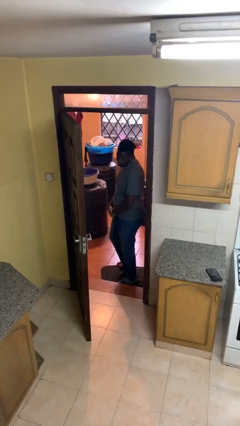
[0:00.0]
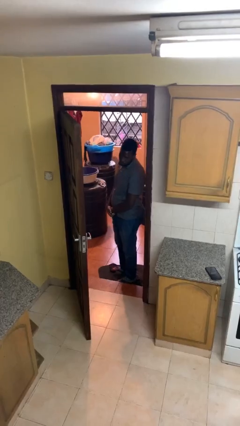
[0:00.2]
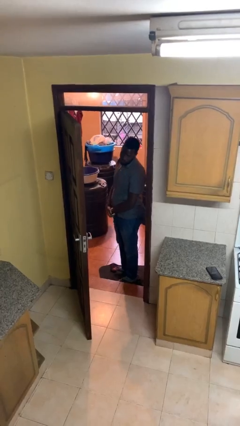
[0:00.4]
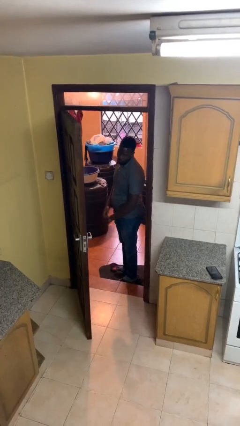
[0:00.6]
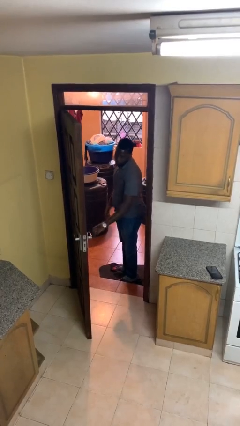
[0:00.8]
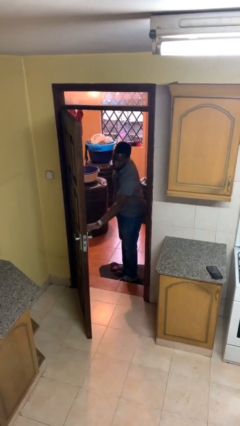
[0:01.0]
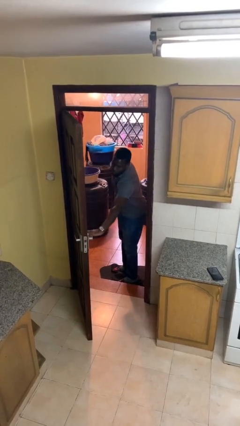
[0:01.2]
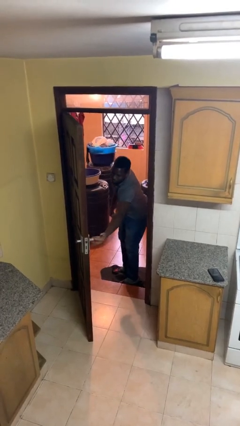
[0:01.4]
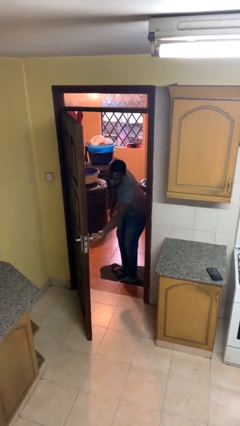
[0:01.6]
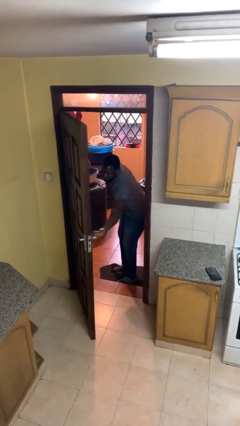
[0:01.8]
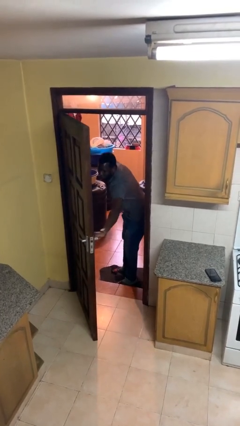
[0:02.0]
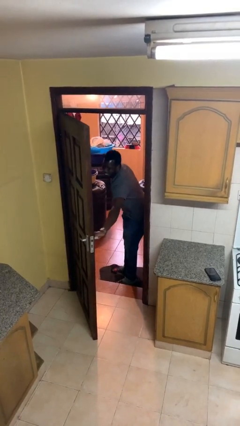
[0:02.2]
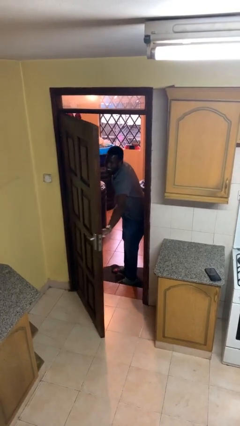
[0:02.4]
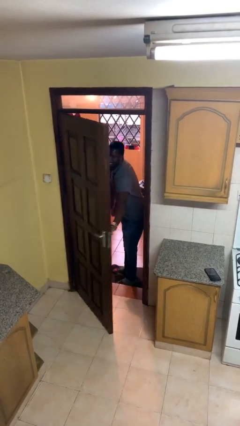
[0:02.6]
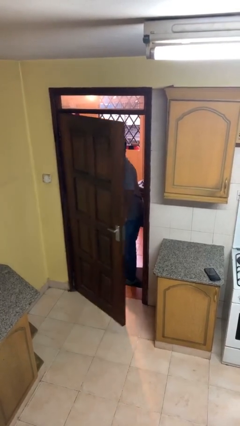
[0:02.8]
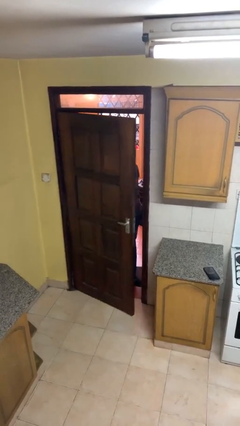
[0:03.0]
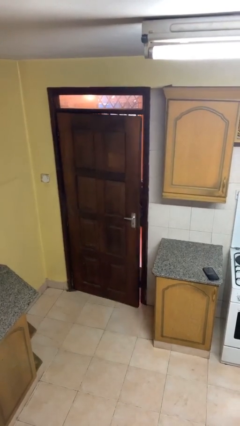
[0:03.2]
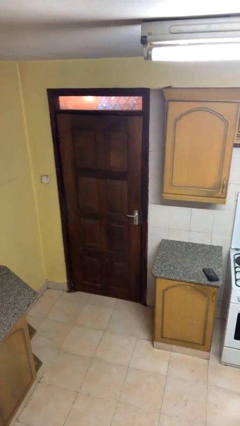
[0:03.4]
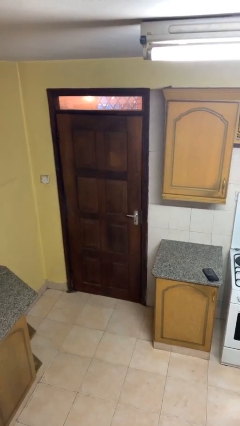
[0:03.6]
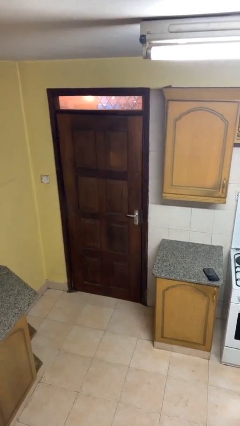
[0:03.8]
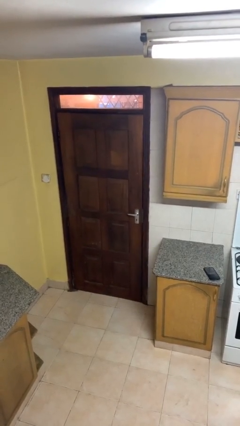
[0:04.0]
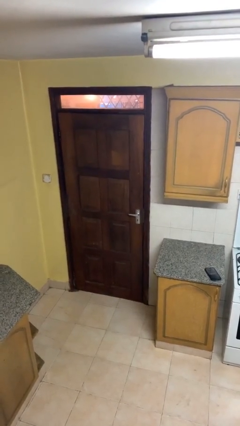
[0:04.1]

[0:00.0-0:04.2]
person closes facility door

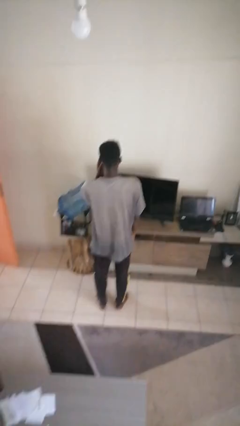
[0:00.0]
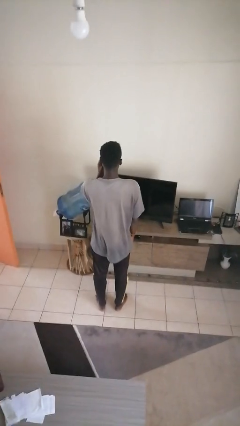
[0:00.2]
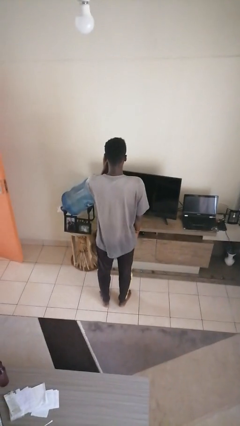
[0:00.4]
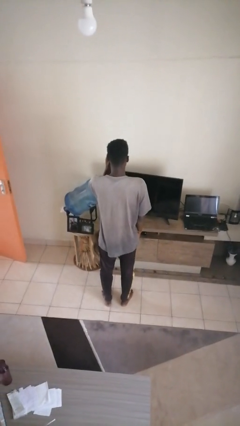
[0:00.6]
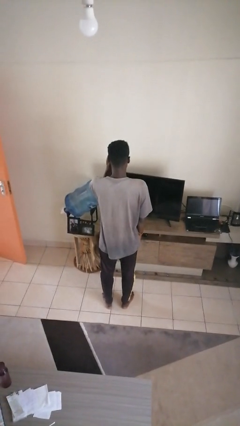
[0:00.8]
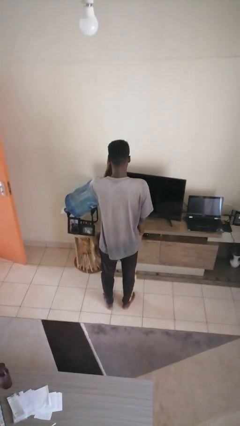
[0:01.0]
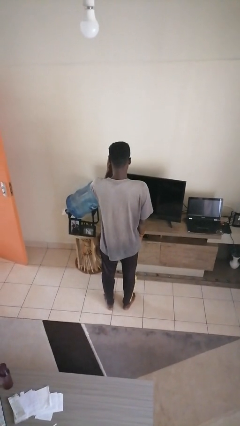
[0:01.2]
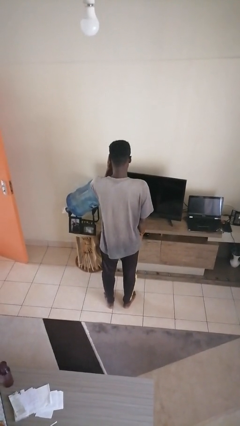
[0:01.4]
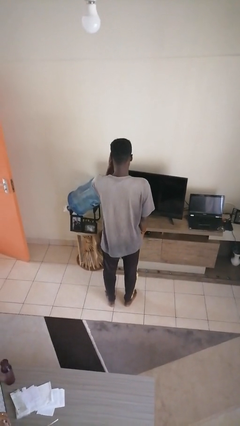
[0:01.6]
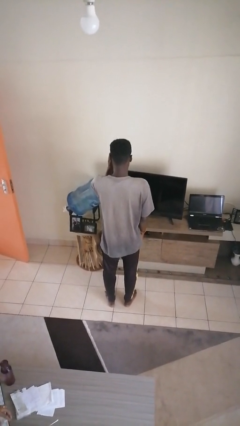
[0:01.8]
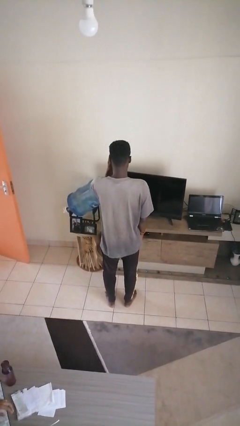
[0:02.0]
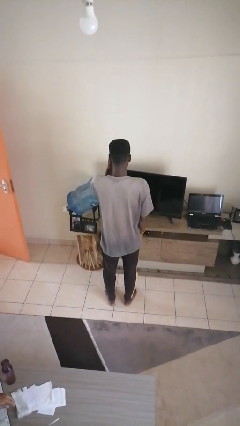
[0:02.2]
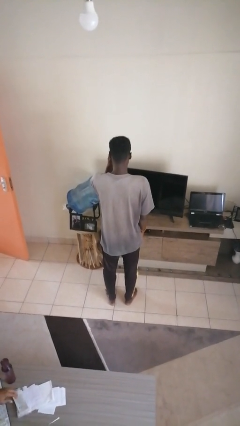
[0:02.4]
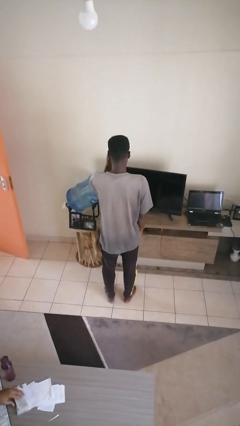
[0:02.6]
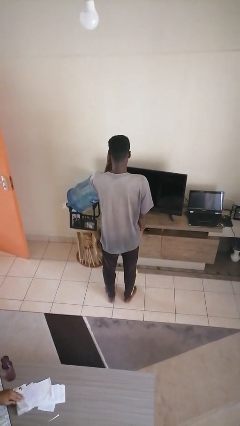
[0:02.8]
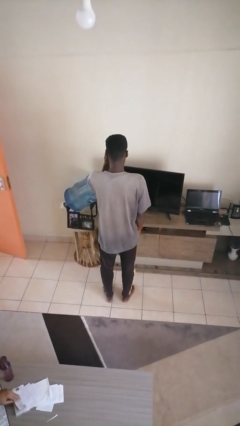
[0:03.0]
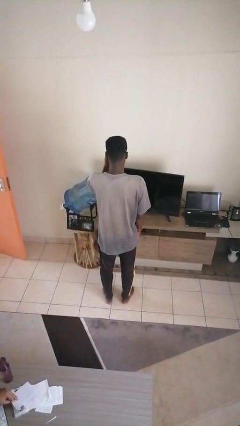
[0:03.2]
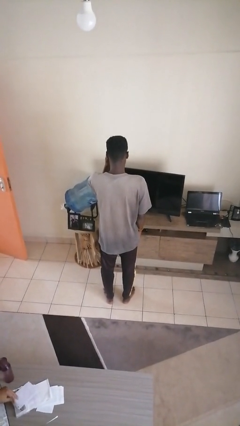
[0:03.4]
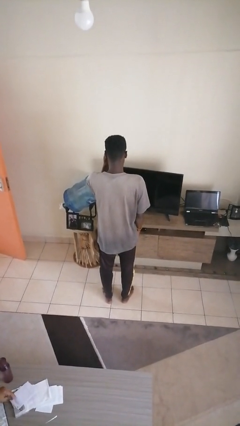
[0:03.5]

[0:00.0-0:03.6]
person scratches face

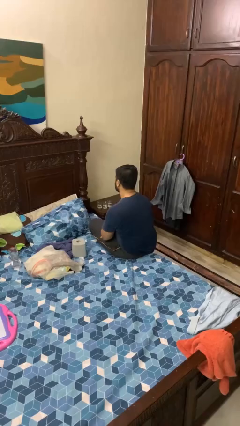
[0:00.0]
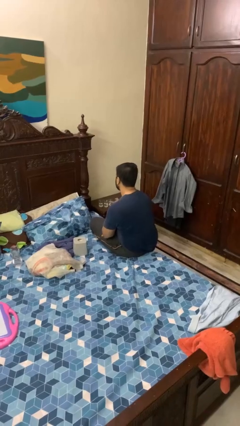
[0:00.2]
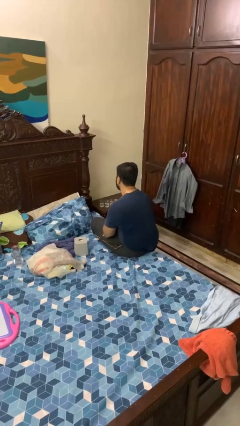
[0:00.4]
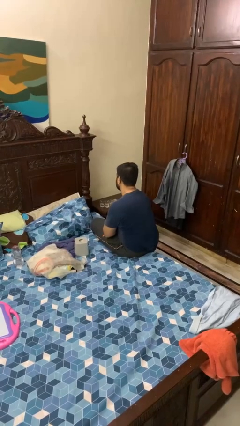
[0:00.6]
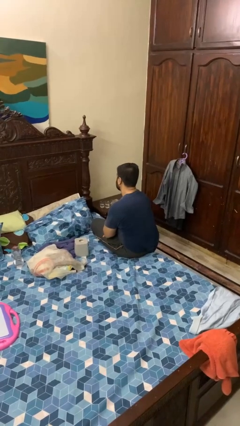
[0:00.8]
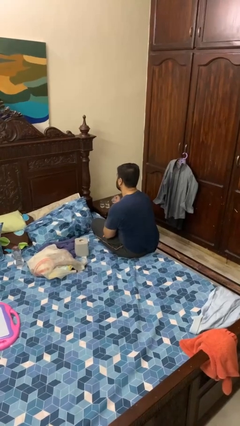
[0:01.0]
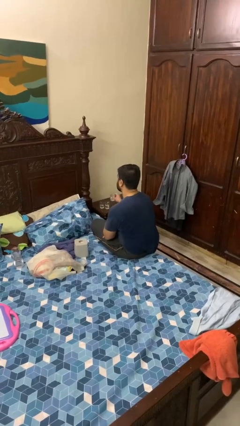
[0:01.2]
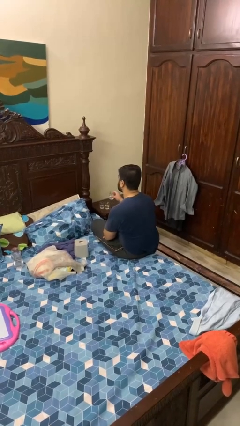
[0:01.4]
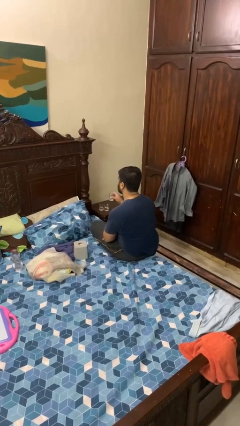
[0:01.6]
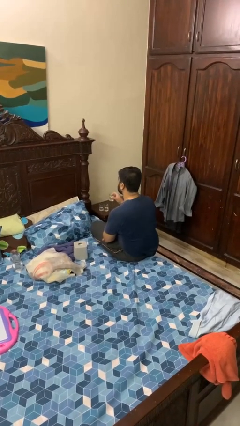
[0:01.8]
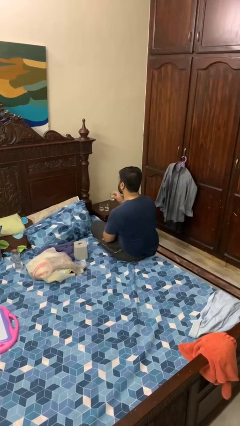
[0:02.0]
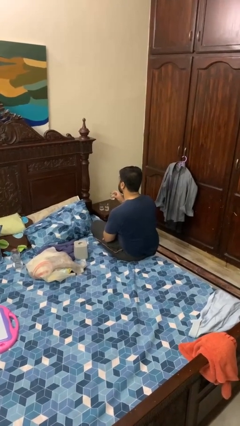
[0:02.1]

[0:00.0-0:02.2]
person picks up object from table

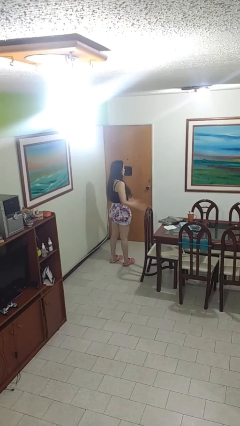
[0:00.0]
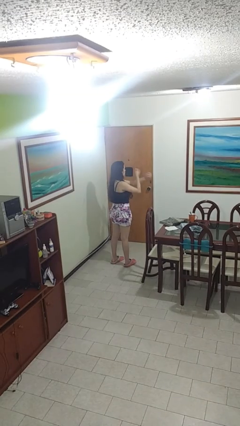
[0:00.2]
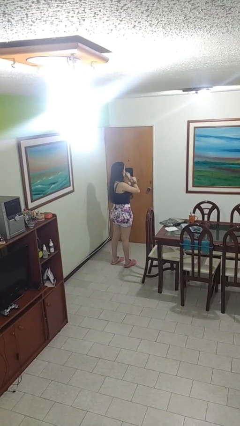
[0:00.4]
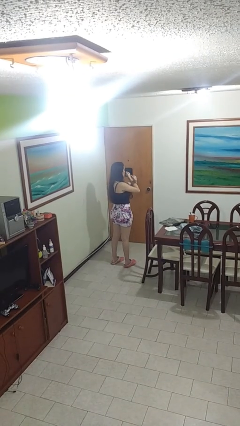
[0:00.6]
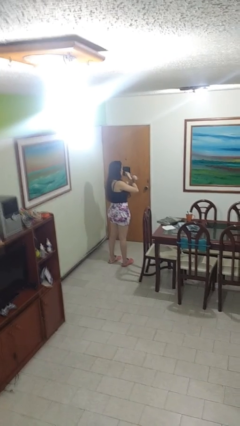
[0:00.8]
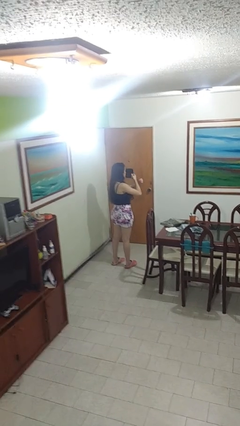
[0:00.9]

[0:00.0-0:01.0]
person gestures arms x

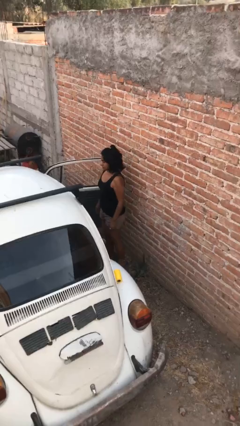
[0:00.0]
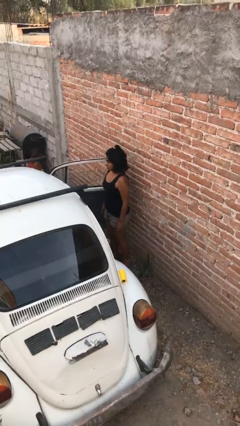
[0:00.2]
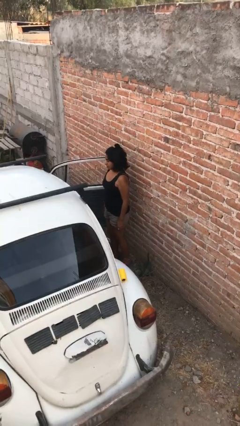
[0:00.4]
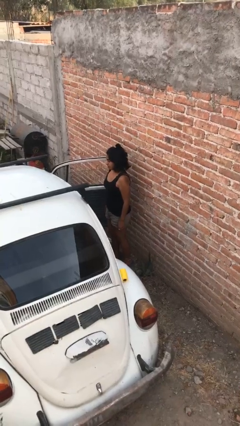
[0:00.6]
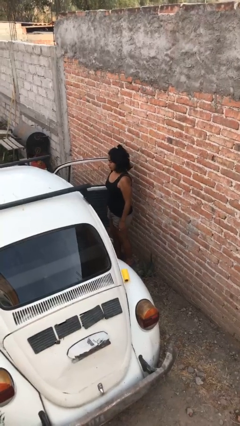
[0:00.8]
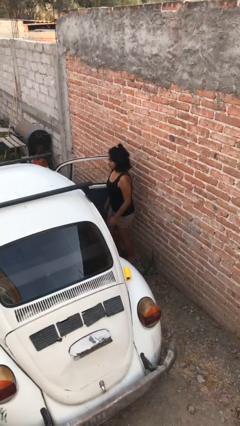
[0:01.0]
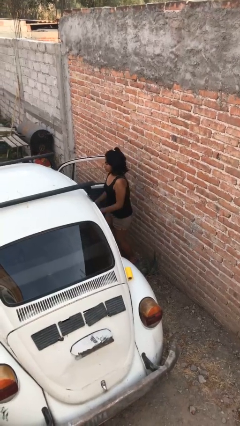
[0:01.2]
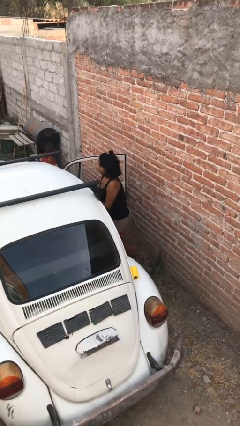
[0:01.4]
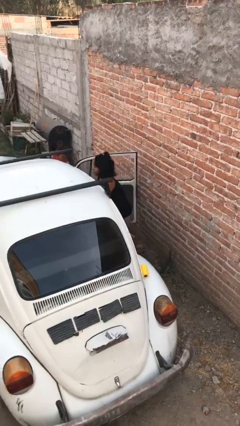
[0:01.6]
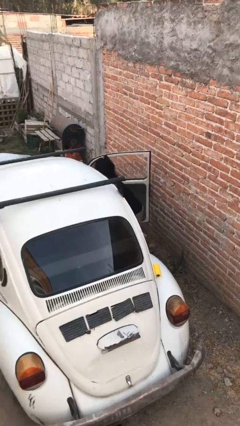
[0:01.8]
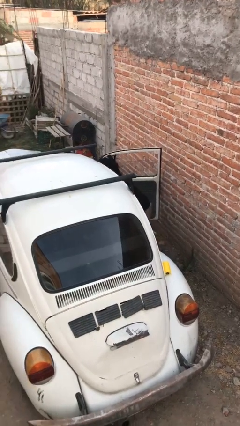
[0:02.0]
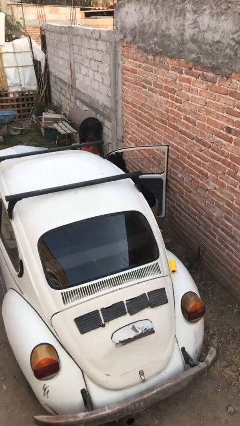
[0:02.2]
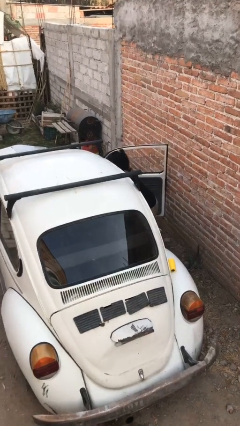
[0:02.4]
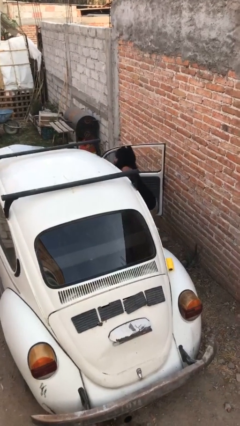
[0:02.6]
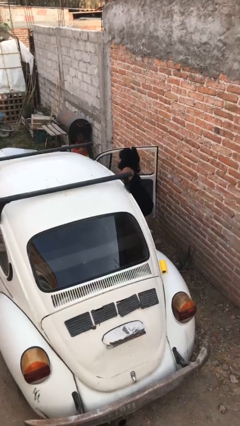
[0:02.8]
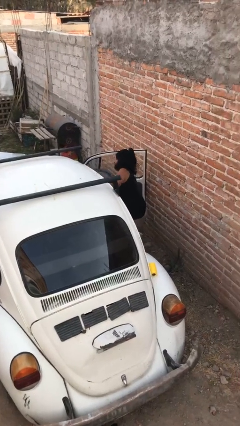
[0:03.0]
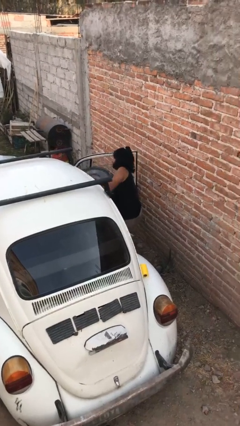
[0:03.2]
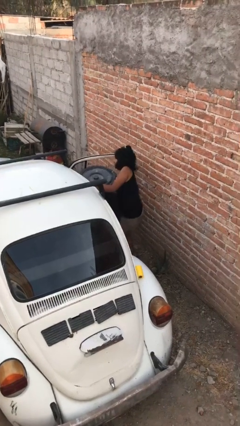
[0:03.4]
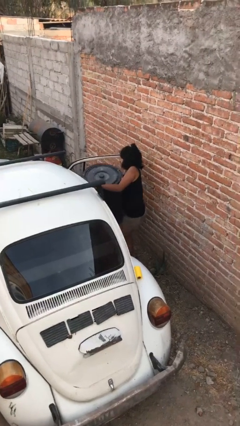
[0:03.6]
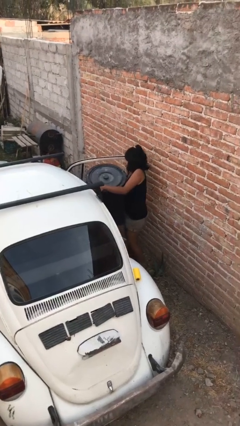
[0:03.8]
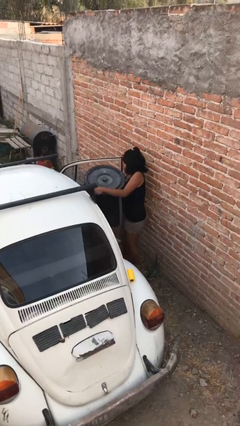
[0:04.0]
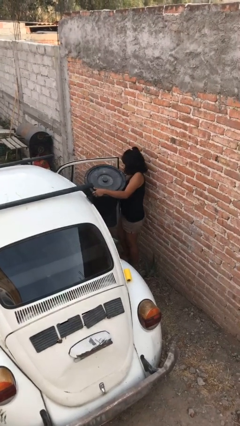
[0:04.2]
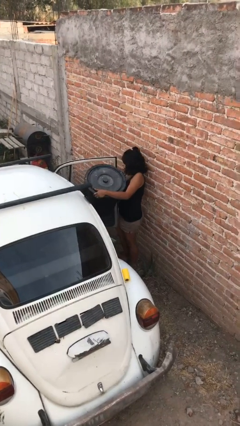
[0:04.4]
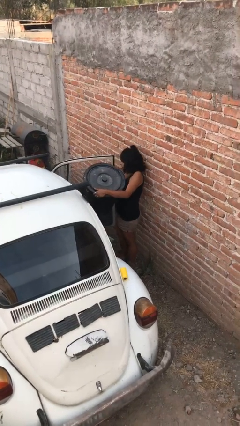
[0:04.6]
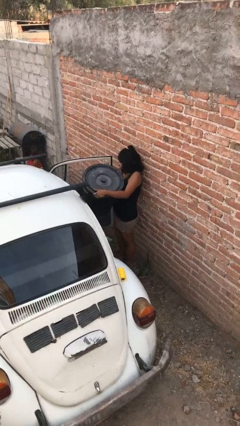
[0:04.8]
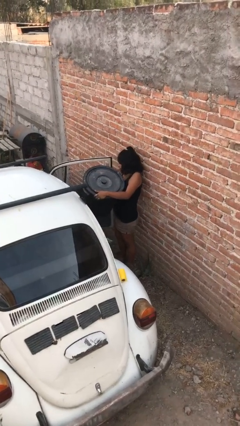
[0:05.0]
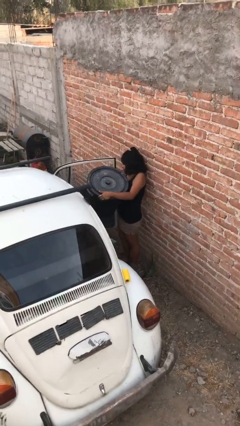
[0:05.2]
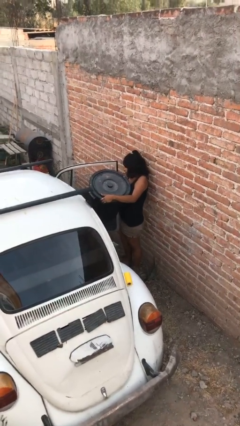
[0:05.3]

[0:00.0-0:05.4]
person unloads car

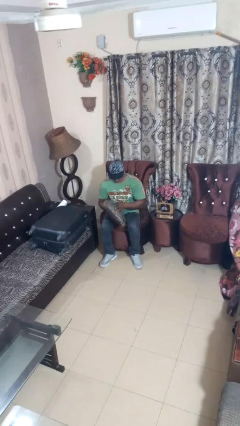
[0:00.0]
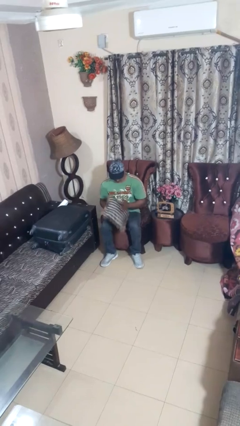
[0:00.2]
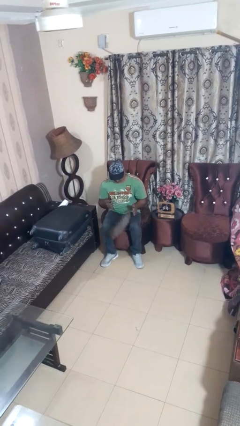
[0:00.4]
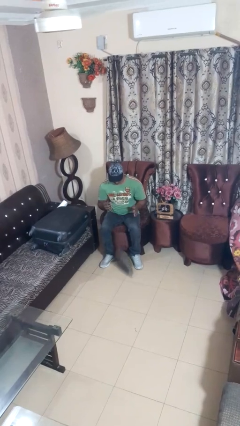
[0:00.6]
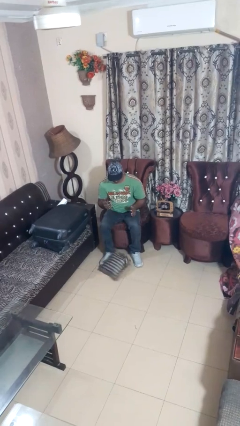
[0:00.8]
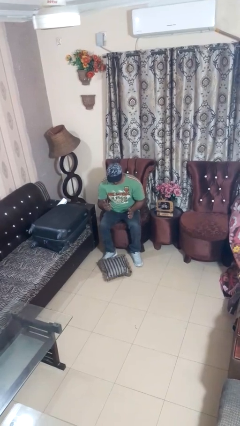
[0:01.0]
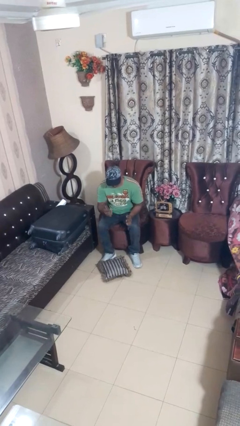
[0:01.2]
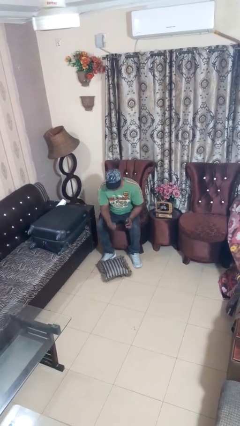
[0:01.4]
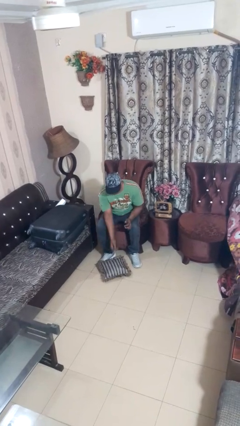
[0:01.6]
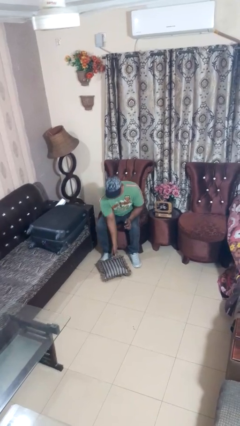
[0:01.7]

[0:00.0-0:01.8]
person drops object
